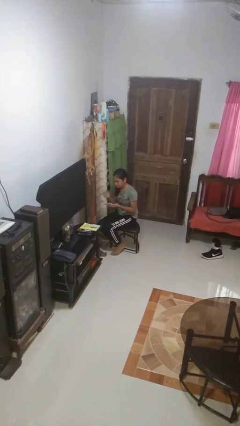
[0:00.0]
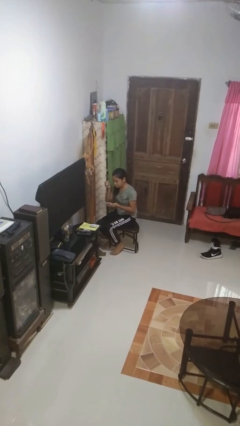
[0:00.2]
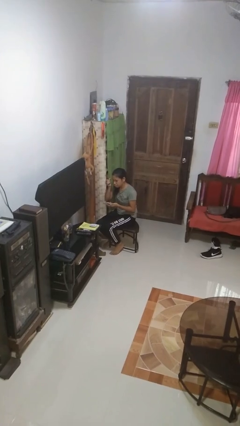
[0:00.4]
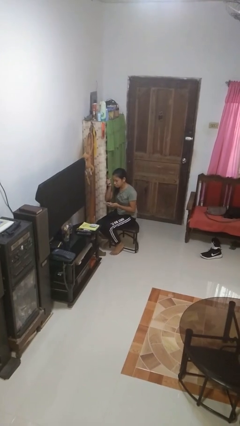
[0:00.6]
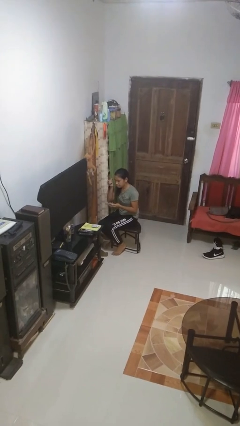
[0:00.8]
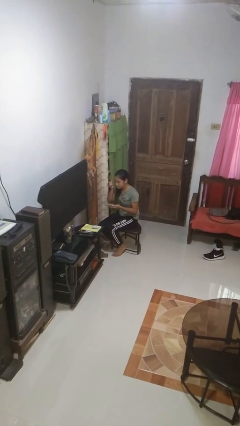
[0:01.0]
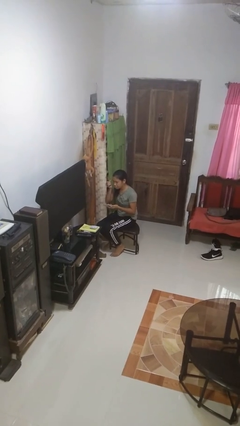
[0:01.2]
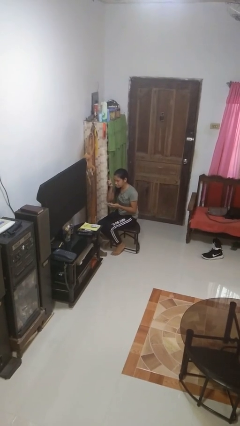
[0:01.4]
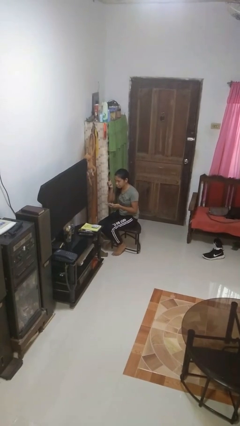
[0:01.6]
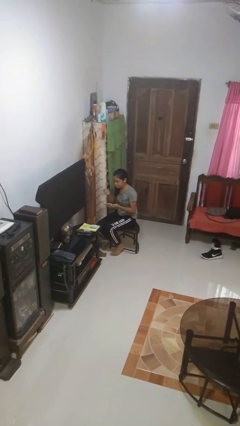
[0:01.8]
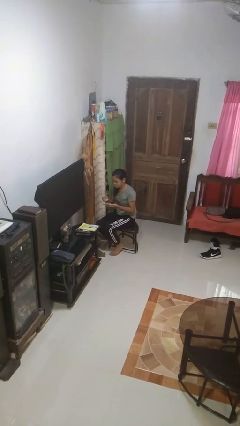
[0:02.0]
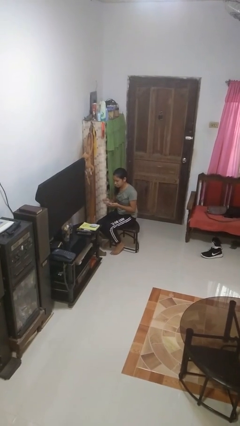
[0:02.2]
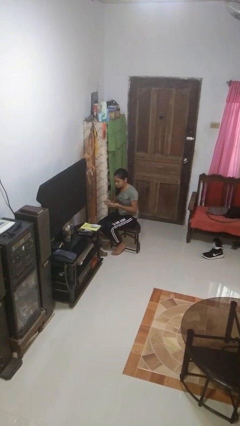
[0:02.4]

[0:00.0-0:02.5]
person applies eye makeup

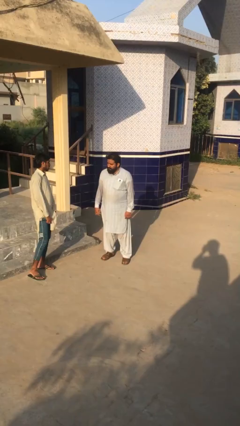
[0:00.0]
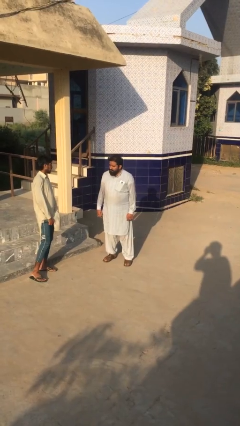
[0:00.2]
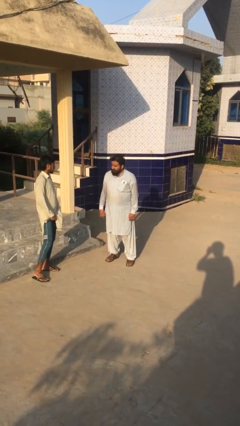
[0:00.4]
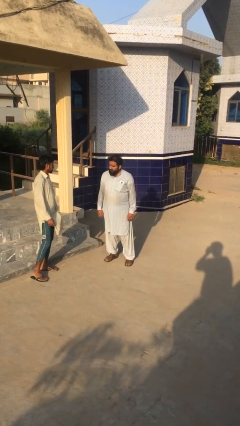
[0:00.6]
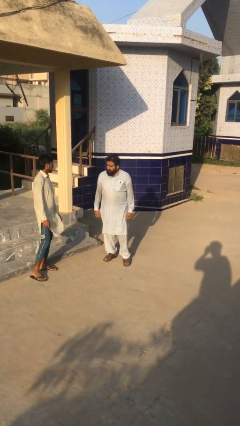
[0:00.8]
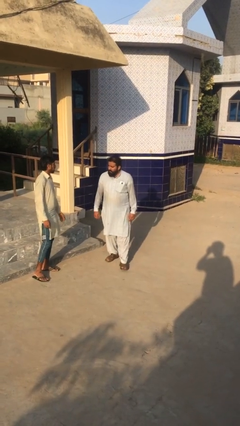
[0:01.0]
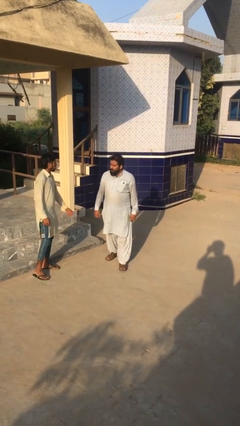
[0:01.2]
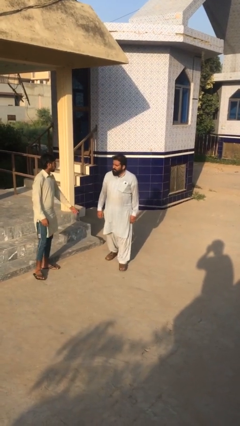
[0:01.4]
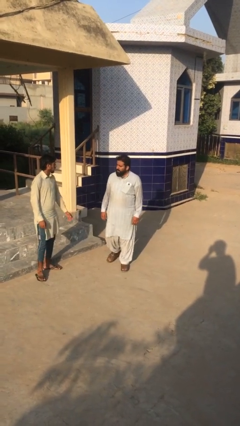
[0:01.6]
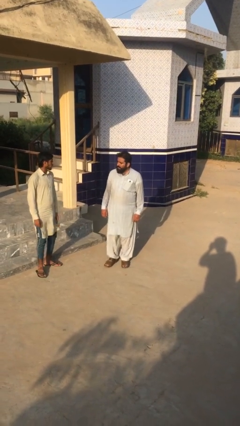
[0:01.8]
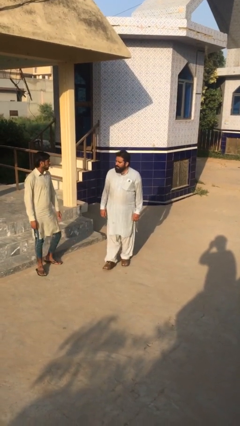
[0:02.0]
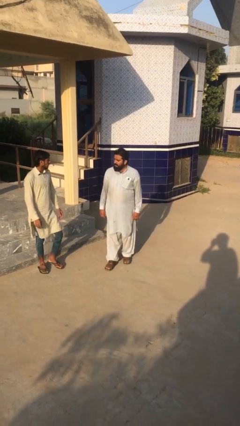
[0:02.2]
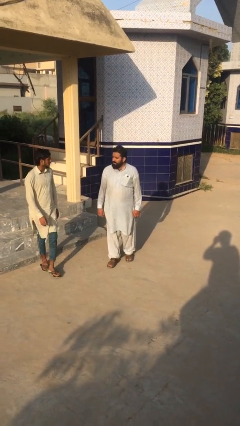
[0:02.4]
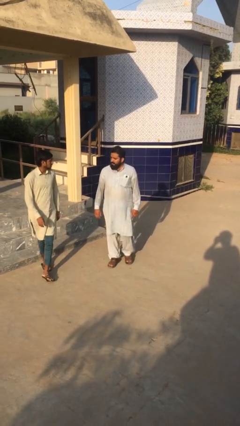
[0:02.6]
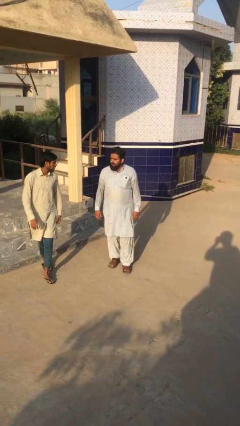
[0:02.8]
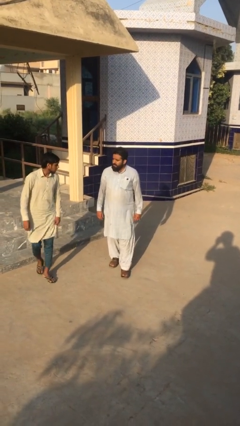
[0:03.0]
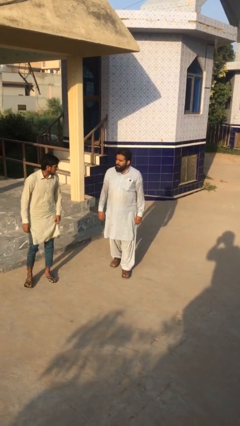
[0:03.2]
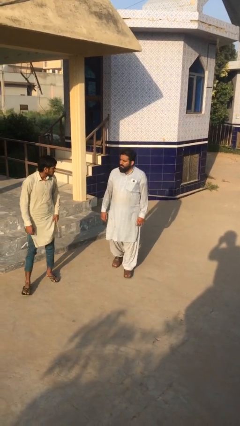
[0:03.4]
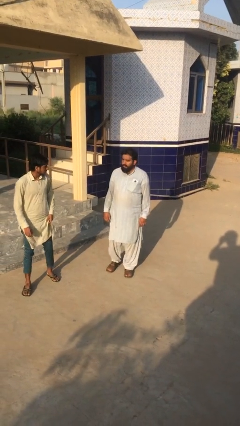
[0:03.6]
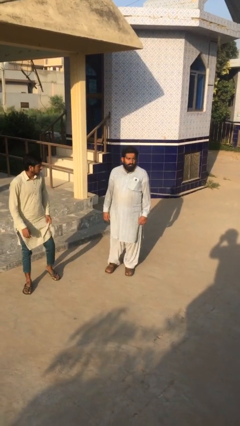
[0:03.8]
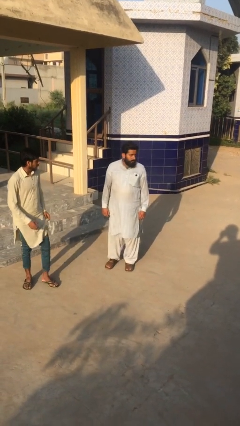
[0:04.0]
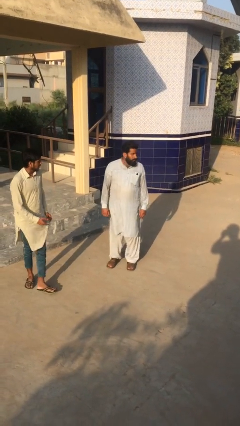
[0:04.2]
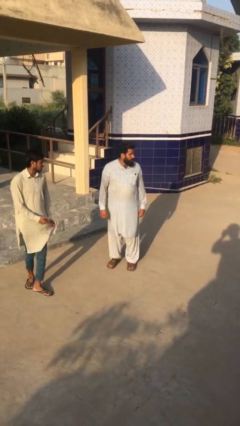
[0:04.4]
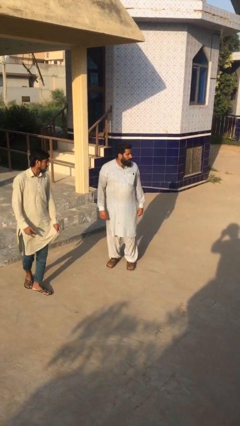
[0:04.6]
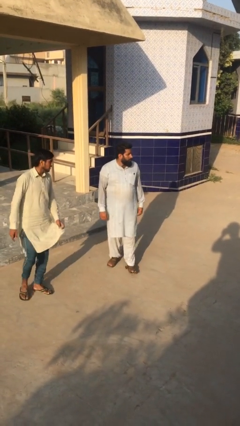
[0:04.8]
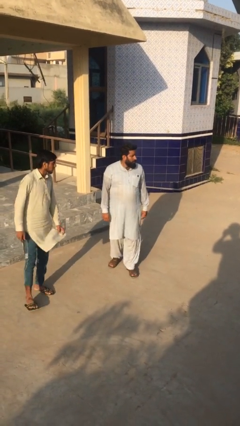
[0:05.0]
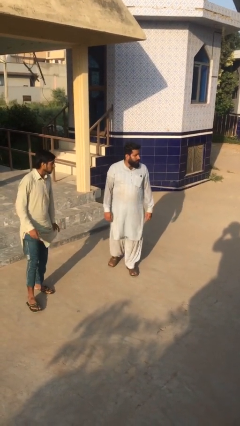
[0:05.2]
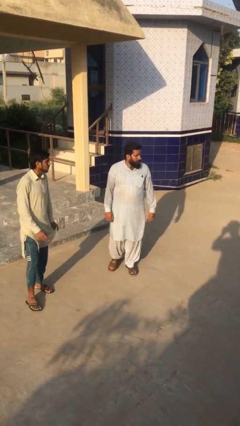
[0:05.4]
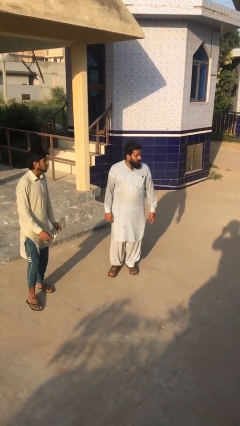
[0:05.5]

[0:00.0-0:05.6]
person talks to person

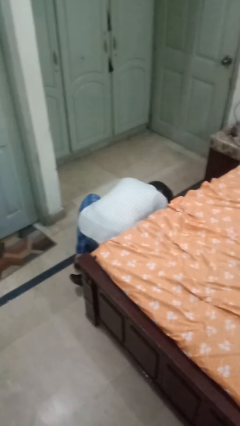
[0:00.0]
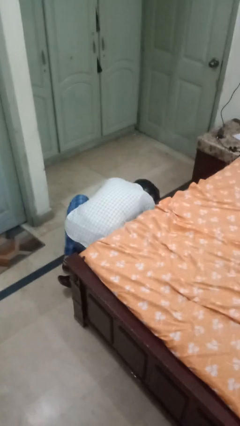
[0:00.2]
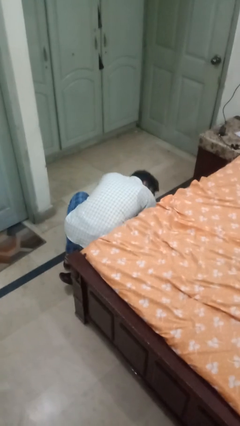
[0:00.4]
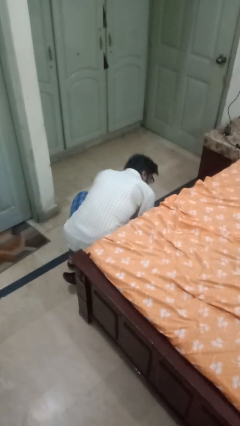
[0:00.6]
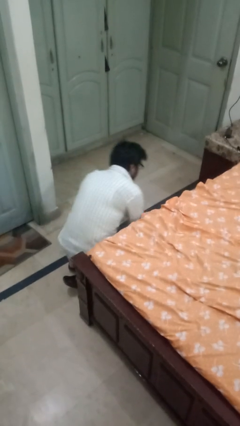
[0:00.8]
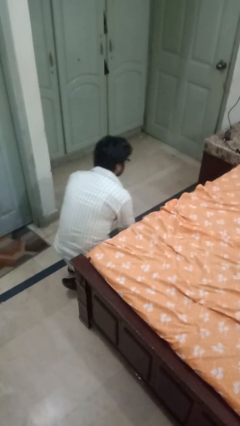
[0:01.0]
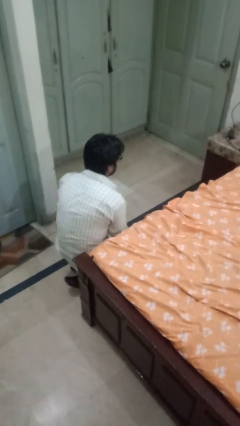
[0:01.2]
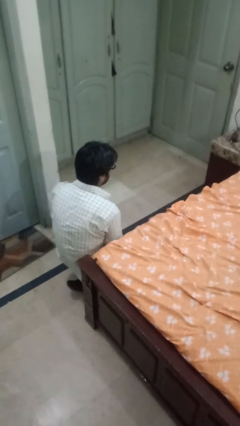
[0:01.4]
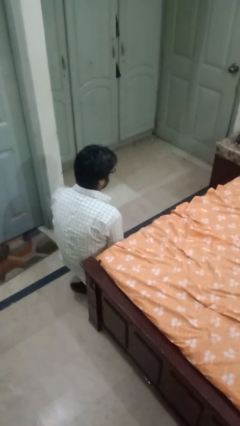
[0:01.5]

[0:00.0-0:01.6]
person stands up

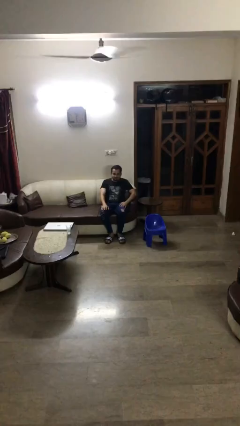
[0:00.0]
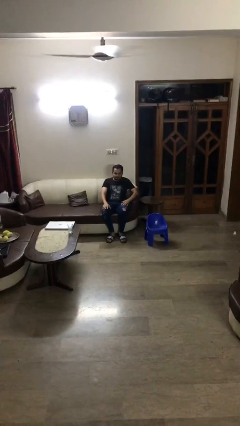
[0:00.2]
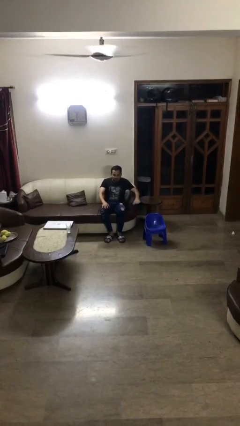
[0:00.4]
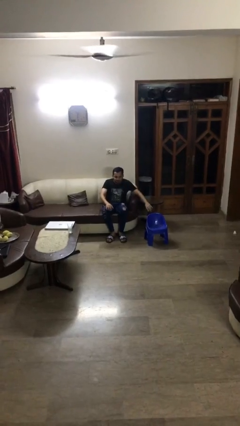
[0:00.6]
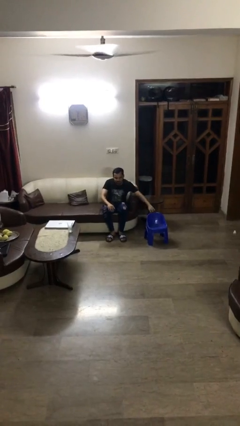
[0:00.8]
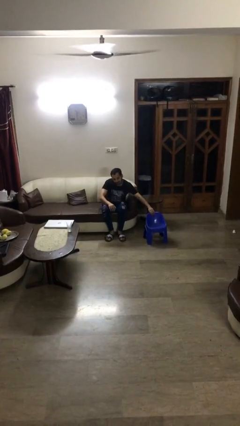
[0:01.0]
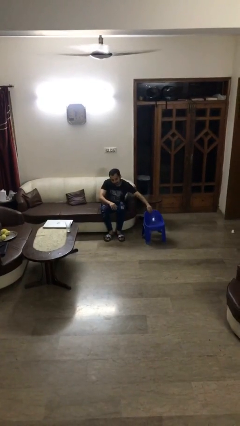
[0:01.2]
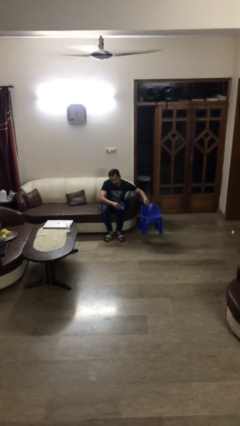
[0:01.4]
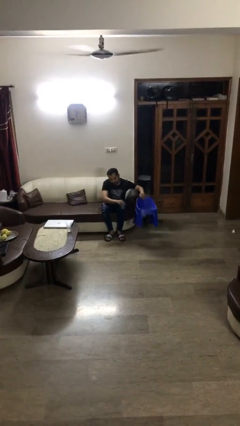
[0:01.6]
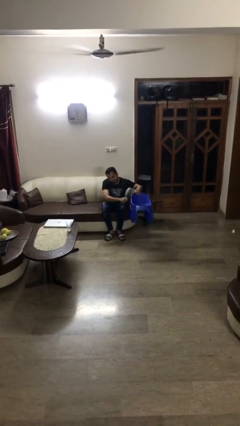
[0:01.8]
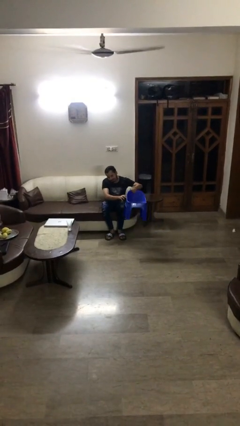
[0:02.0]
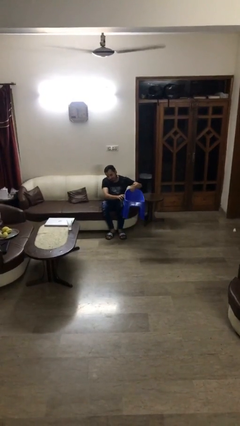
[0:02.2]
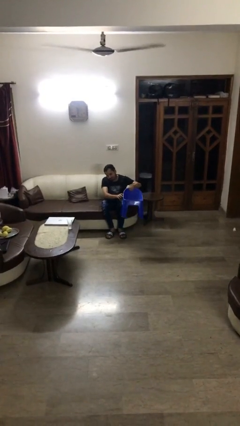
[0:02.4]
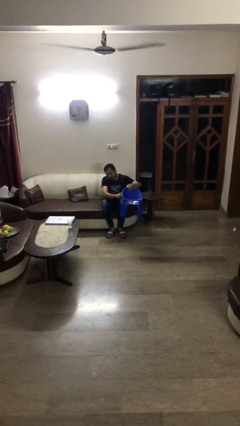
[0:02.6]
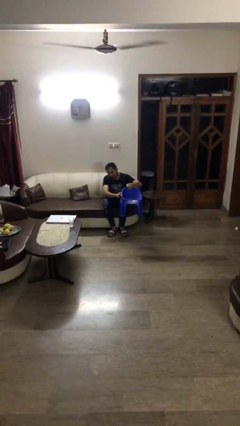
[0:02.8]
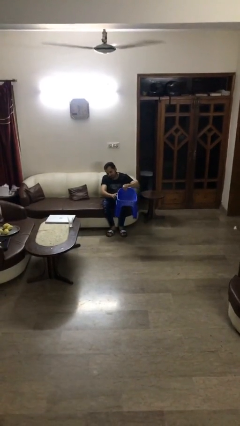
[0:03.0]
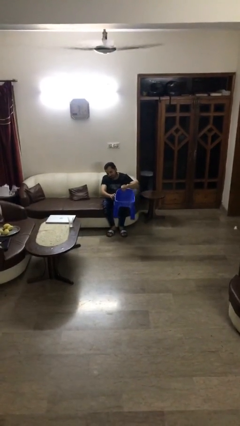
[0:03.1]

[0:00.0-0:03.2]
person picks up object from floor

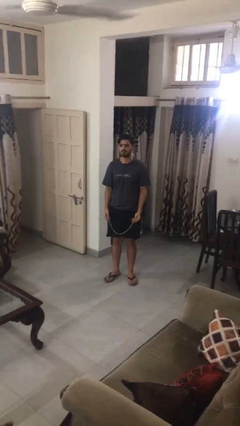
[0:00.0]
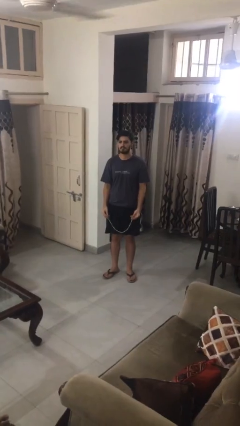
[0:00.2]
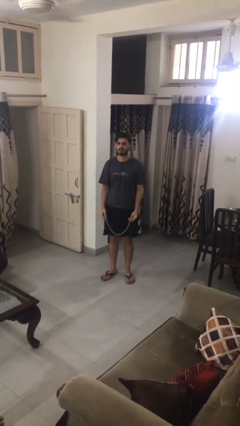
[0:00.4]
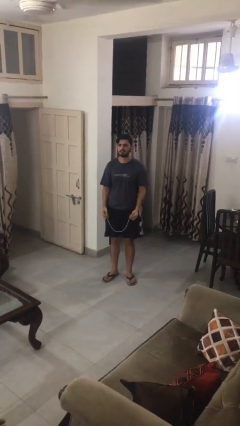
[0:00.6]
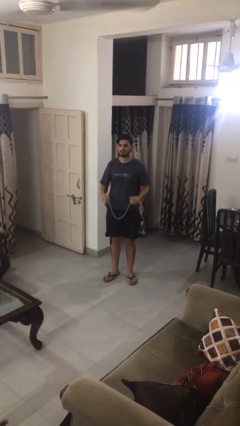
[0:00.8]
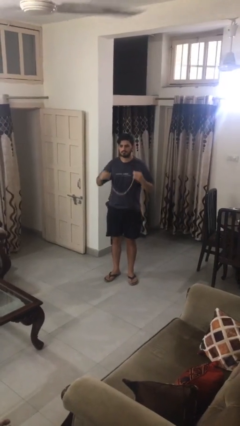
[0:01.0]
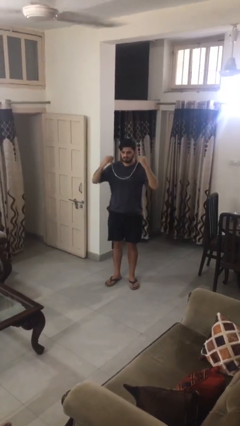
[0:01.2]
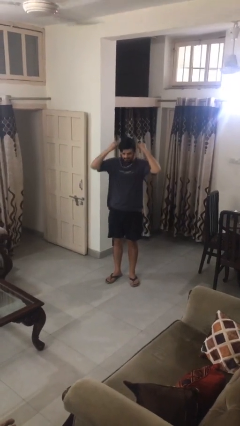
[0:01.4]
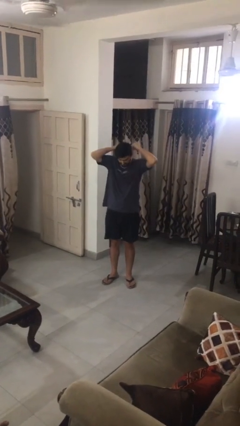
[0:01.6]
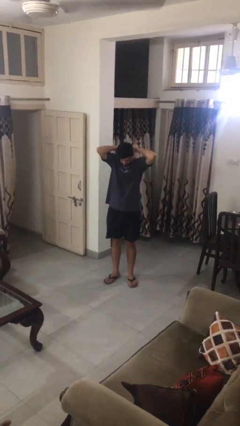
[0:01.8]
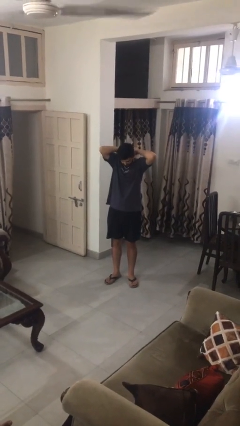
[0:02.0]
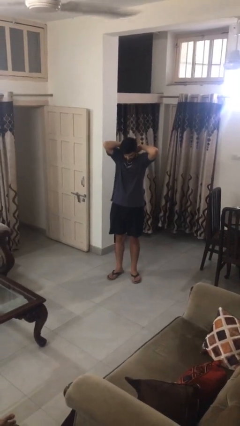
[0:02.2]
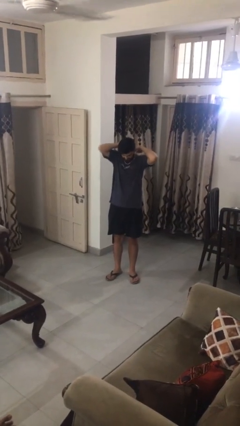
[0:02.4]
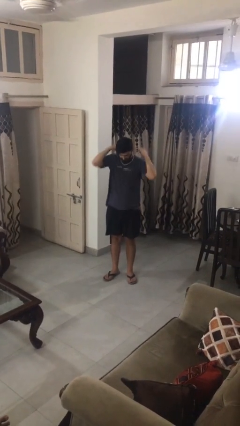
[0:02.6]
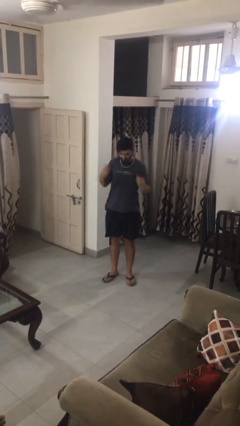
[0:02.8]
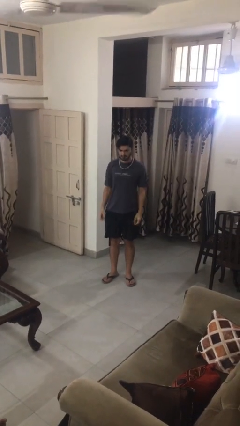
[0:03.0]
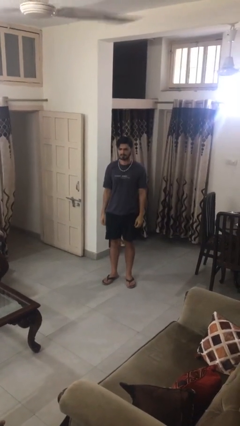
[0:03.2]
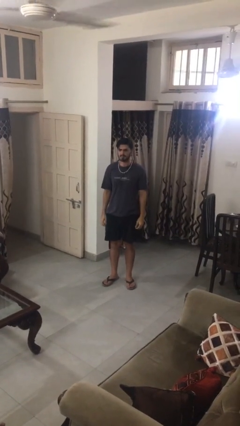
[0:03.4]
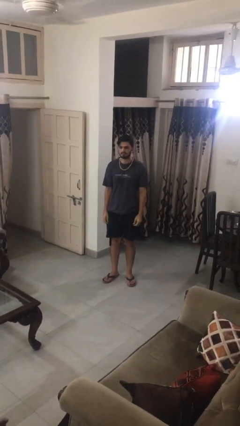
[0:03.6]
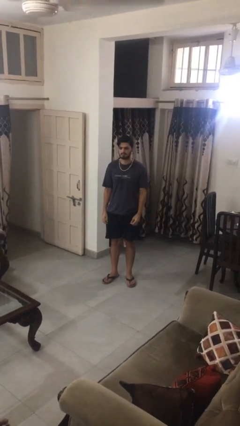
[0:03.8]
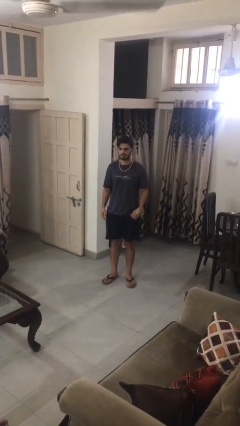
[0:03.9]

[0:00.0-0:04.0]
person puts on necklace

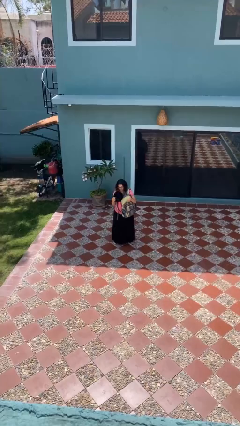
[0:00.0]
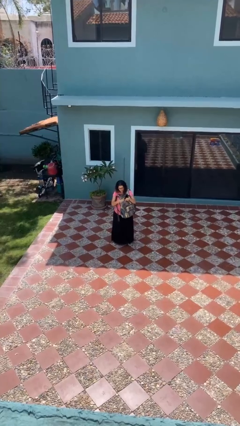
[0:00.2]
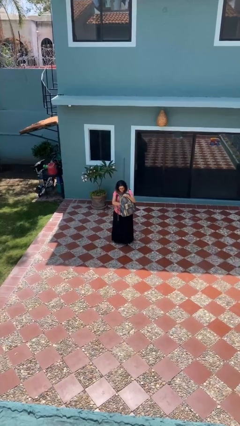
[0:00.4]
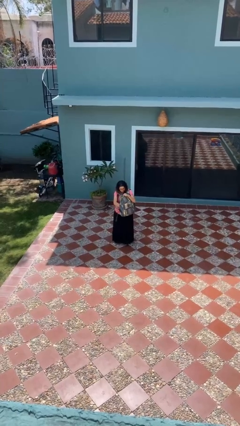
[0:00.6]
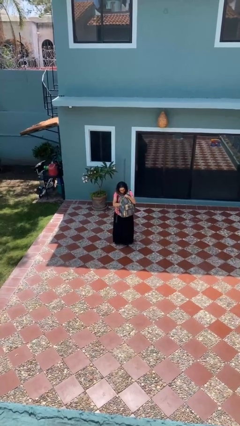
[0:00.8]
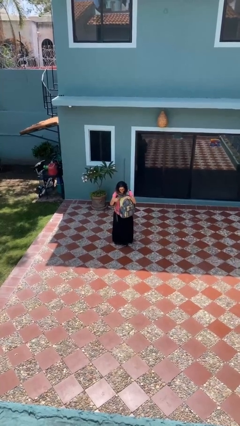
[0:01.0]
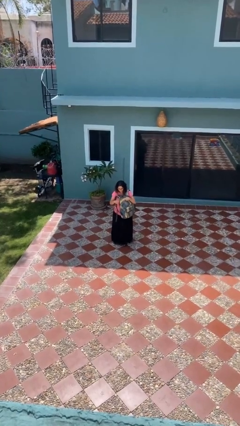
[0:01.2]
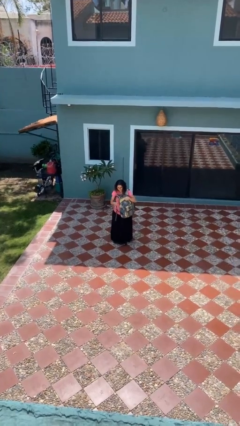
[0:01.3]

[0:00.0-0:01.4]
person puts object into backpack
